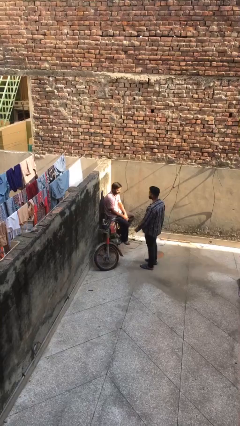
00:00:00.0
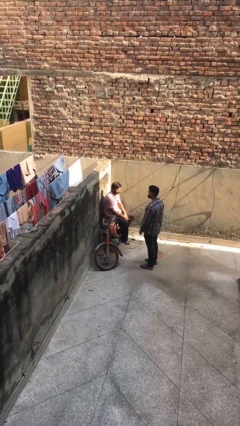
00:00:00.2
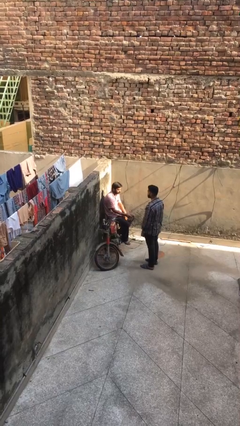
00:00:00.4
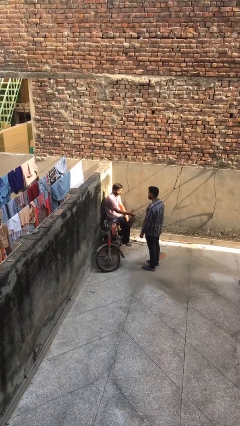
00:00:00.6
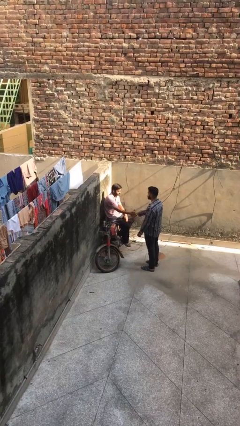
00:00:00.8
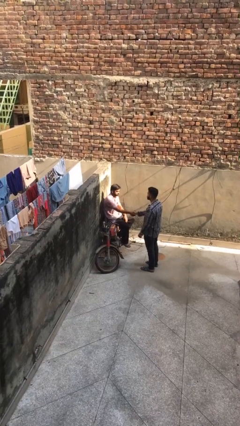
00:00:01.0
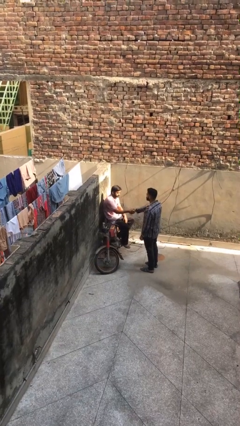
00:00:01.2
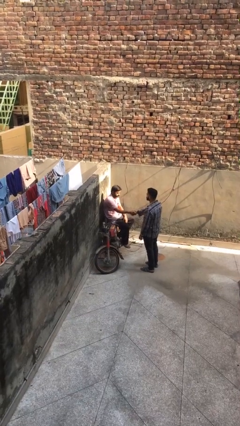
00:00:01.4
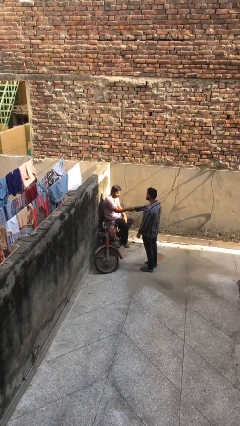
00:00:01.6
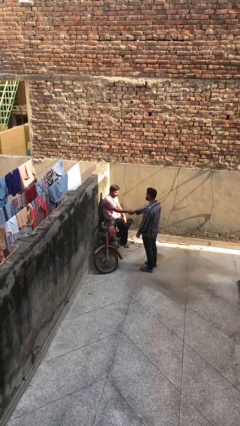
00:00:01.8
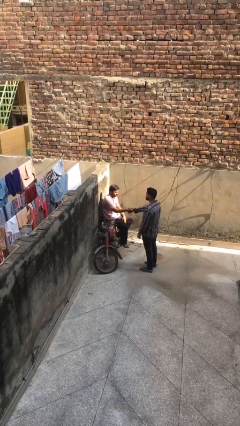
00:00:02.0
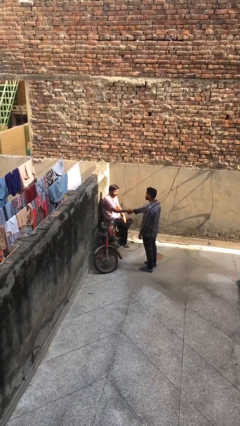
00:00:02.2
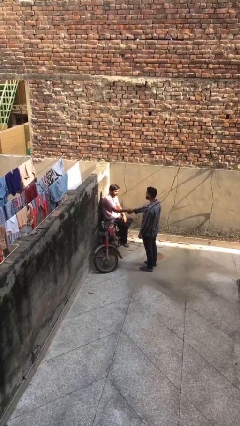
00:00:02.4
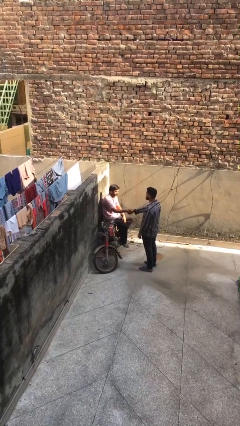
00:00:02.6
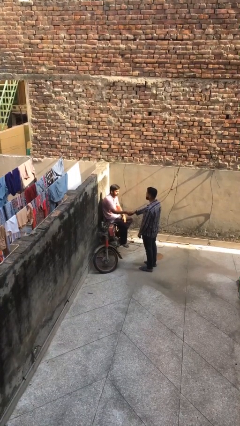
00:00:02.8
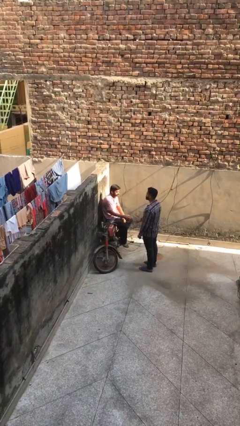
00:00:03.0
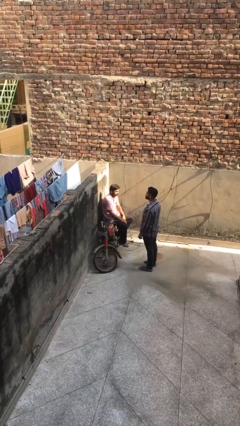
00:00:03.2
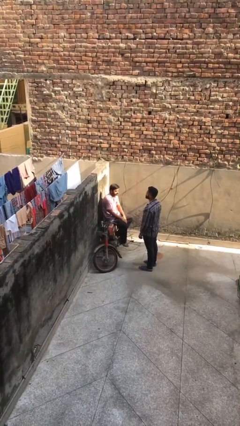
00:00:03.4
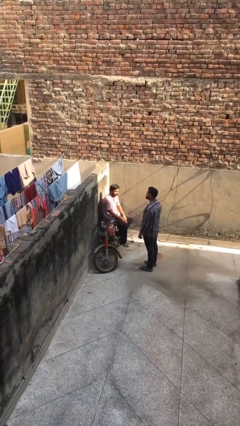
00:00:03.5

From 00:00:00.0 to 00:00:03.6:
person shakes hand

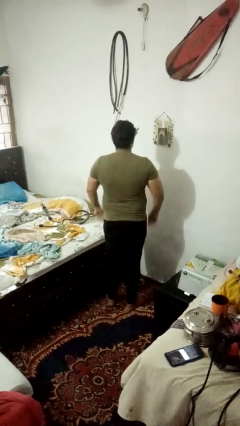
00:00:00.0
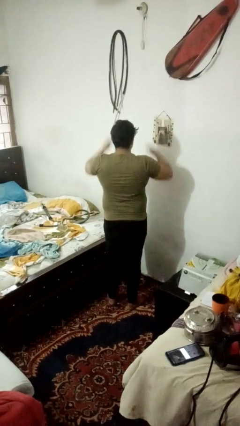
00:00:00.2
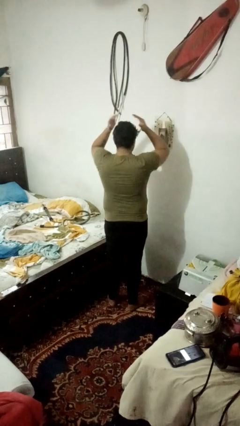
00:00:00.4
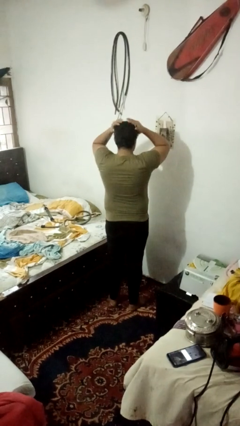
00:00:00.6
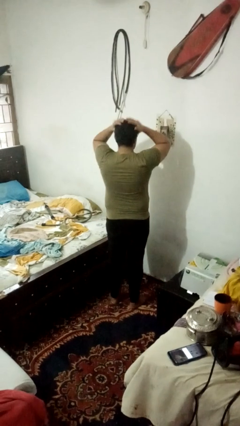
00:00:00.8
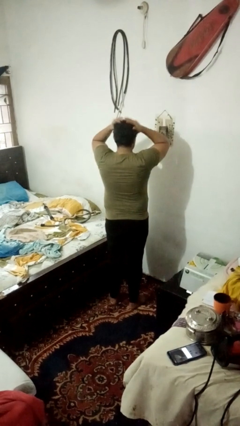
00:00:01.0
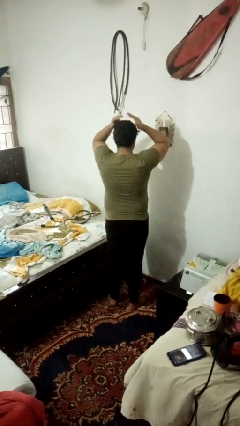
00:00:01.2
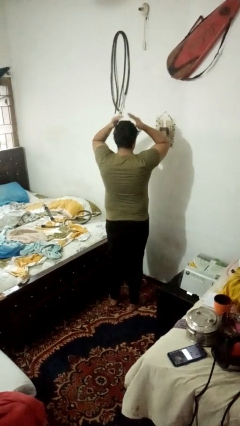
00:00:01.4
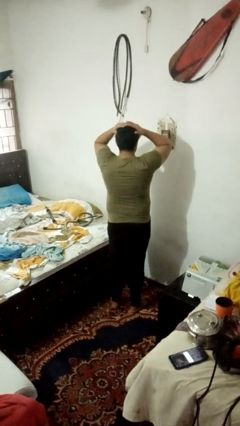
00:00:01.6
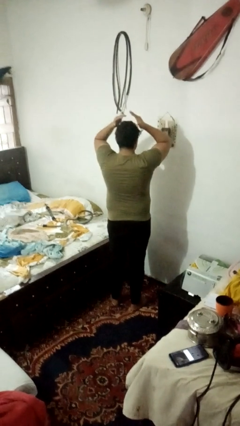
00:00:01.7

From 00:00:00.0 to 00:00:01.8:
person pats head

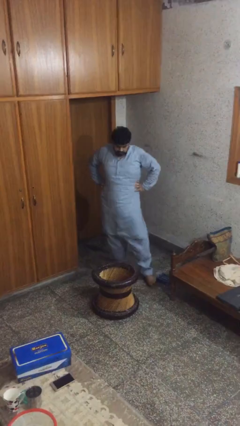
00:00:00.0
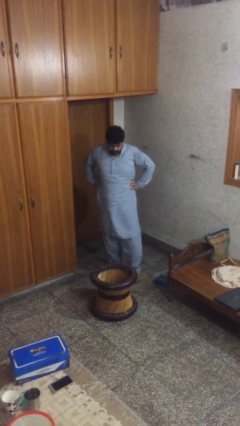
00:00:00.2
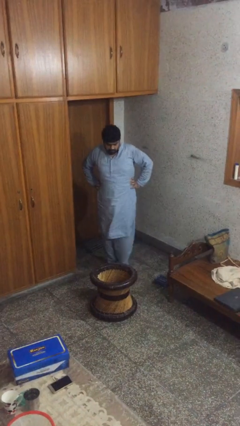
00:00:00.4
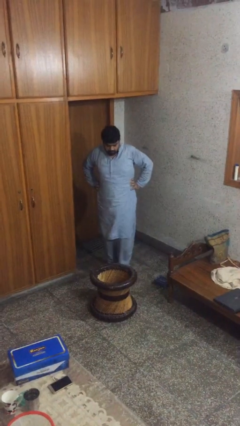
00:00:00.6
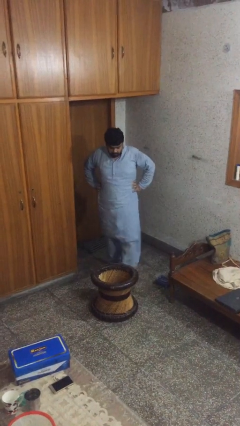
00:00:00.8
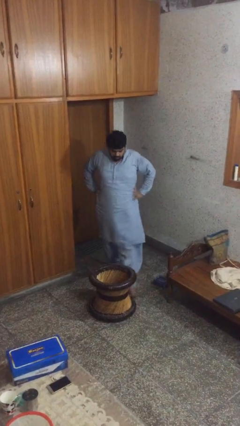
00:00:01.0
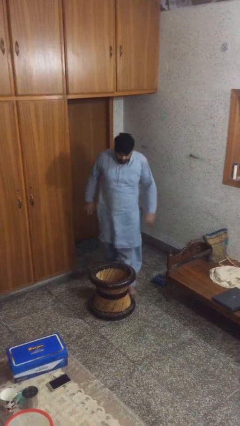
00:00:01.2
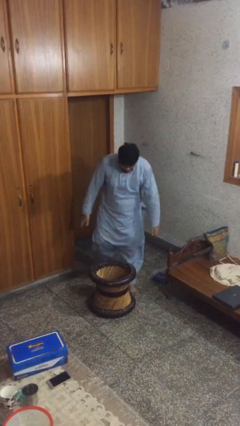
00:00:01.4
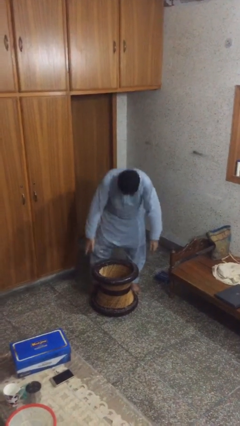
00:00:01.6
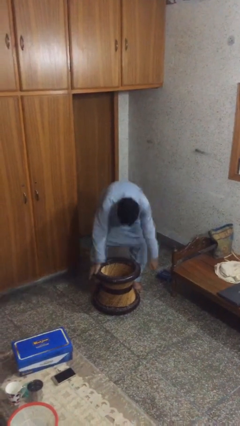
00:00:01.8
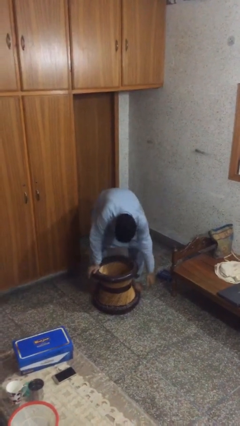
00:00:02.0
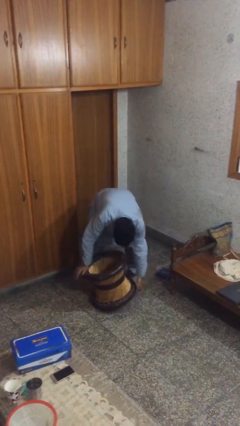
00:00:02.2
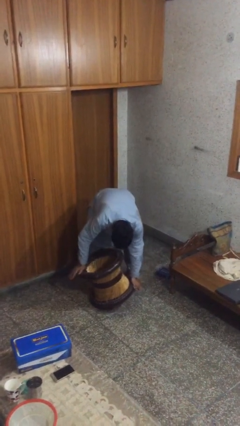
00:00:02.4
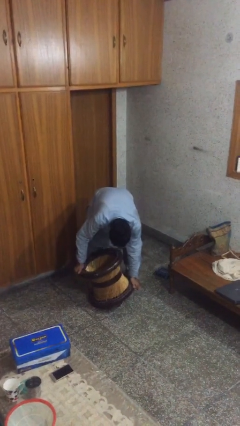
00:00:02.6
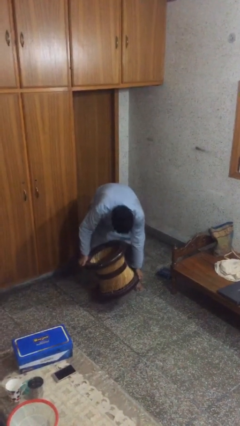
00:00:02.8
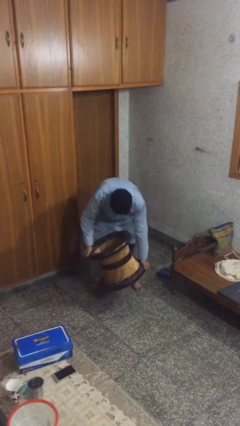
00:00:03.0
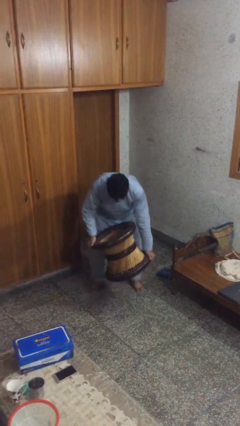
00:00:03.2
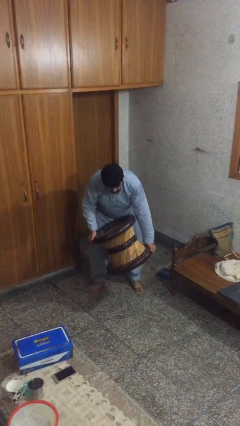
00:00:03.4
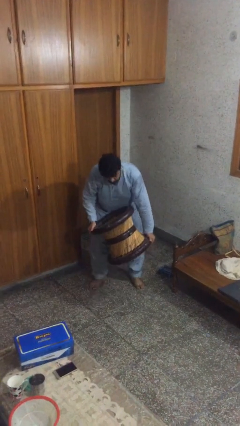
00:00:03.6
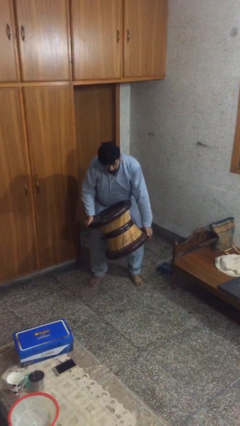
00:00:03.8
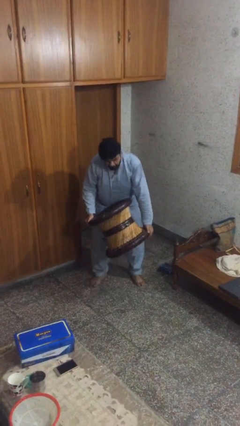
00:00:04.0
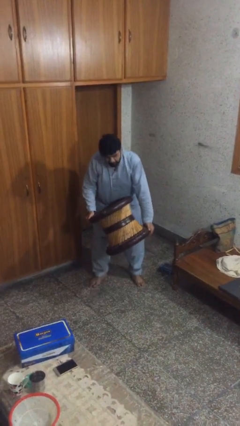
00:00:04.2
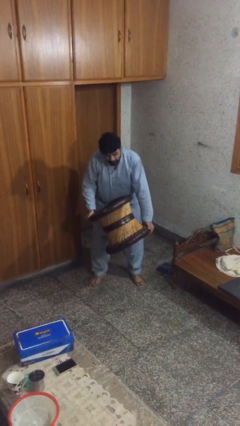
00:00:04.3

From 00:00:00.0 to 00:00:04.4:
person picks up object from floor

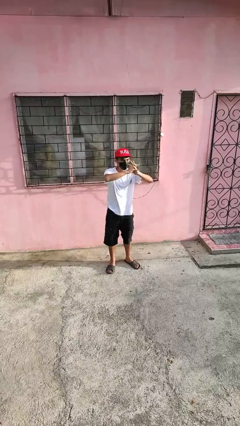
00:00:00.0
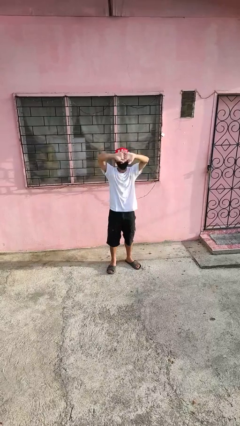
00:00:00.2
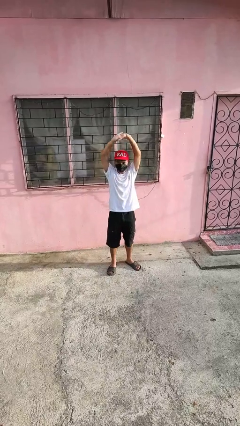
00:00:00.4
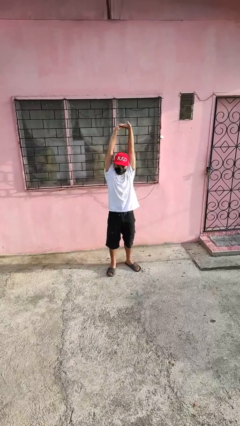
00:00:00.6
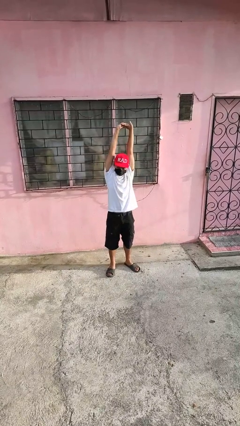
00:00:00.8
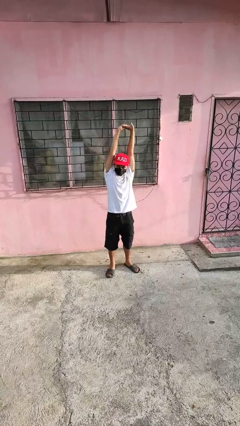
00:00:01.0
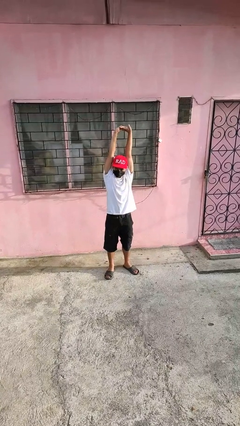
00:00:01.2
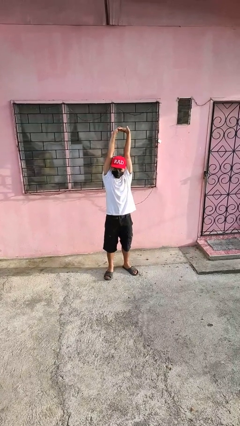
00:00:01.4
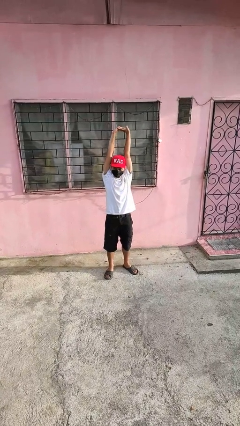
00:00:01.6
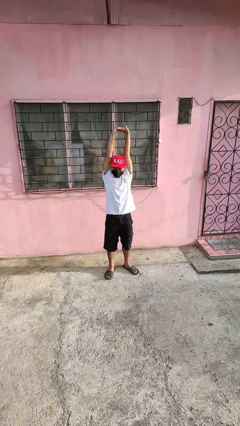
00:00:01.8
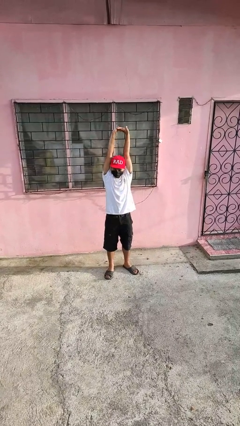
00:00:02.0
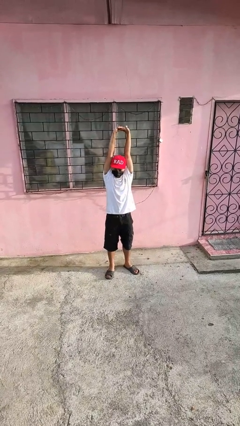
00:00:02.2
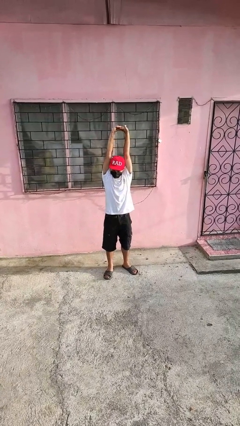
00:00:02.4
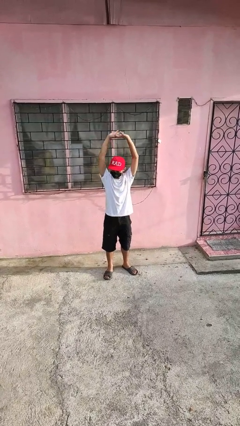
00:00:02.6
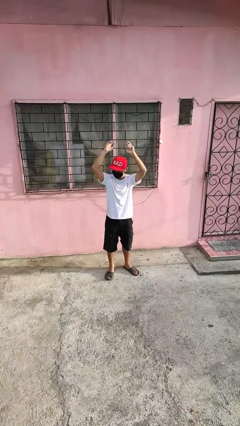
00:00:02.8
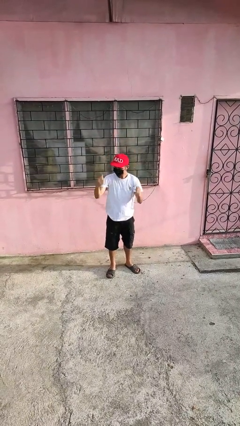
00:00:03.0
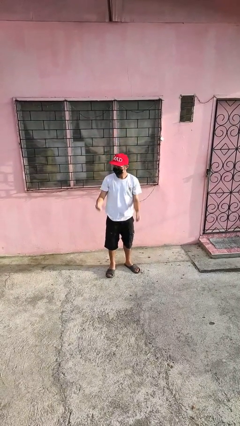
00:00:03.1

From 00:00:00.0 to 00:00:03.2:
person stretches arms over head

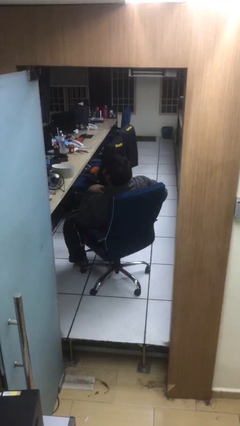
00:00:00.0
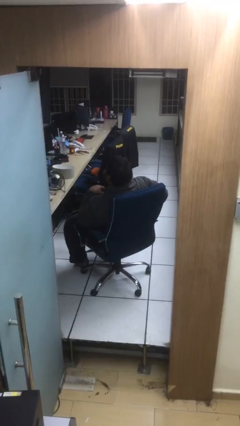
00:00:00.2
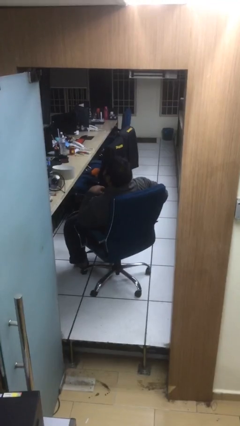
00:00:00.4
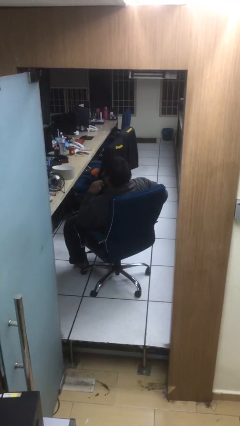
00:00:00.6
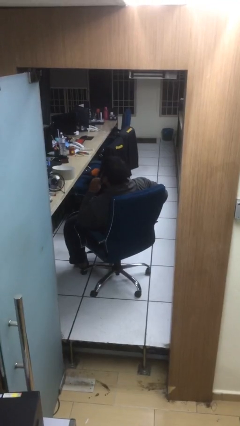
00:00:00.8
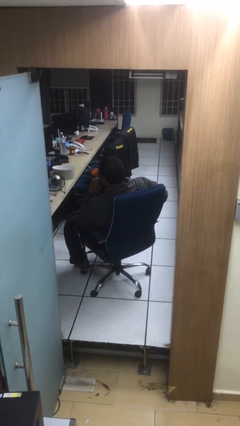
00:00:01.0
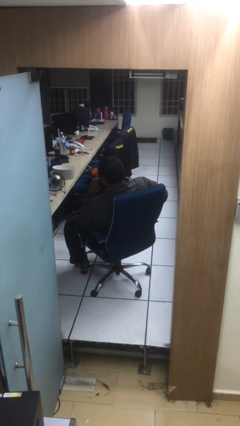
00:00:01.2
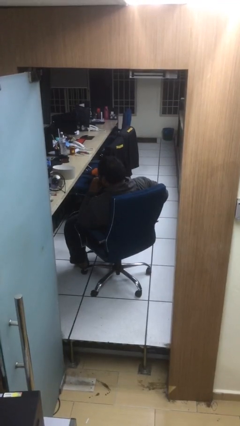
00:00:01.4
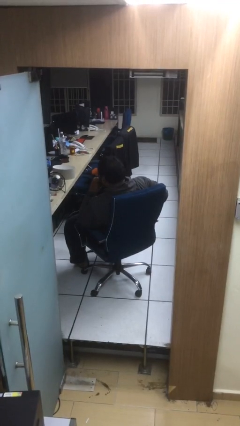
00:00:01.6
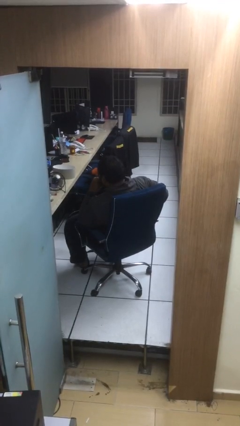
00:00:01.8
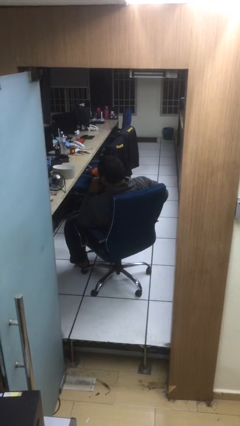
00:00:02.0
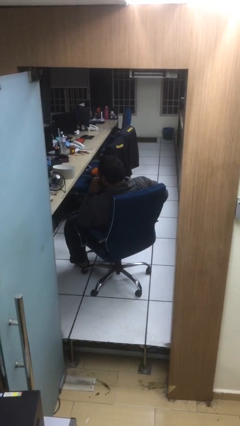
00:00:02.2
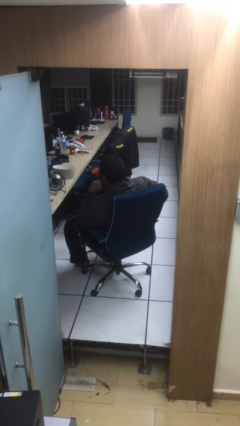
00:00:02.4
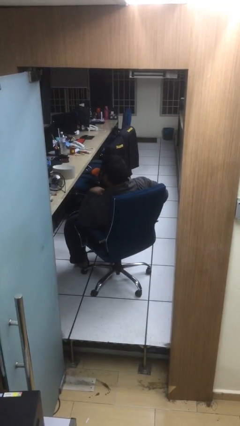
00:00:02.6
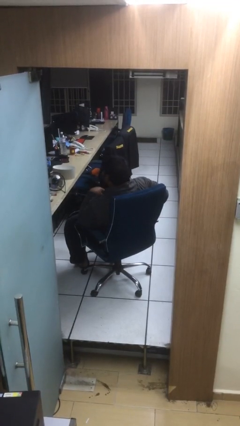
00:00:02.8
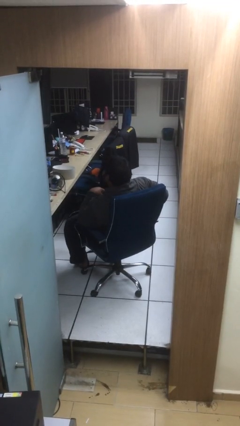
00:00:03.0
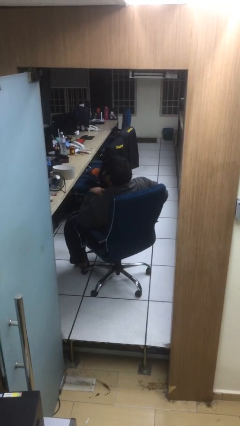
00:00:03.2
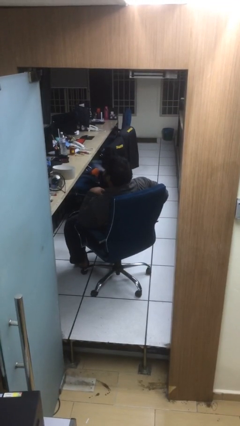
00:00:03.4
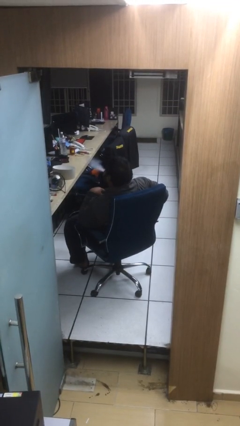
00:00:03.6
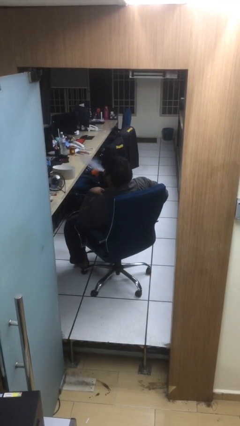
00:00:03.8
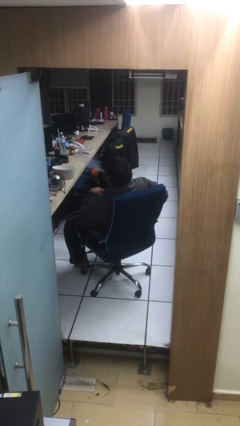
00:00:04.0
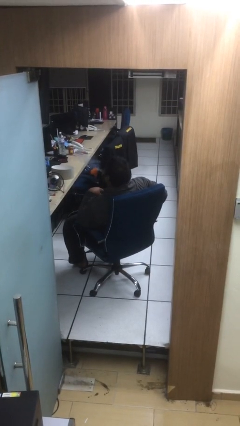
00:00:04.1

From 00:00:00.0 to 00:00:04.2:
person vapes

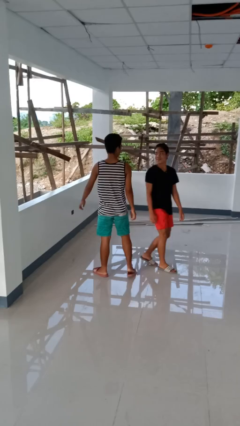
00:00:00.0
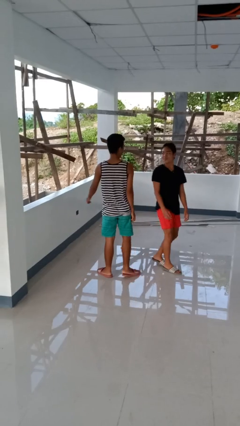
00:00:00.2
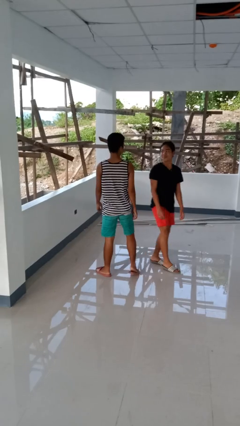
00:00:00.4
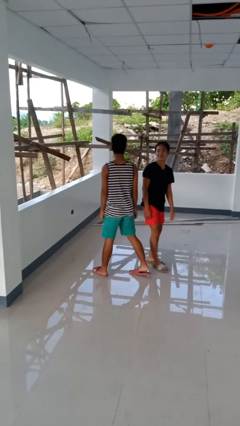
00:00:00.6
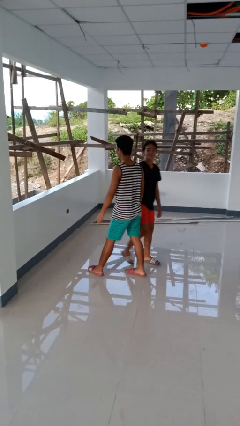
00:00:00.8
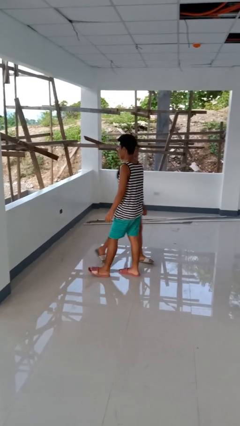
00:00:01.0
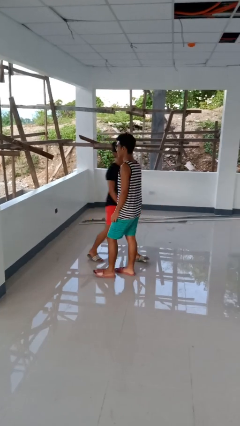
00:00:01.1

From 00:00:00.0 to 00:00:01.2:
person bumps into person
